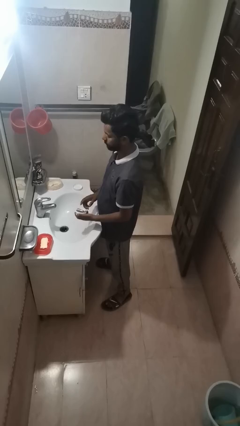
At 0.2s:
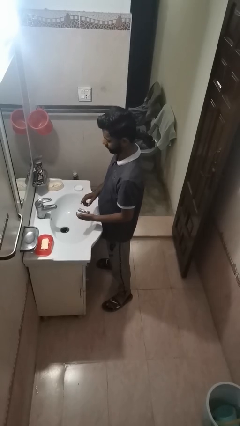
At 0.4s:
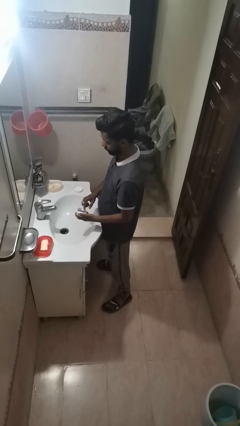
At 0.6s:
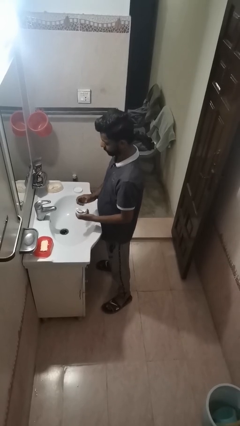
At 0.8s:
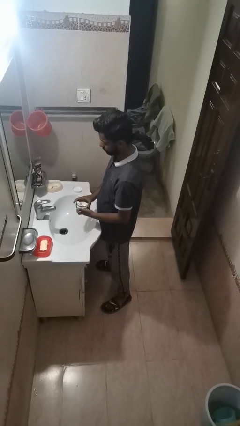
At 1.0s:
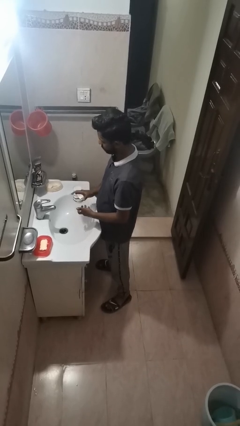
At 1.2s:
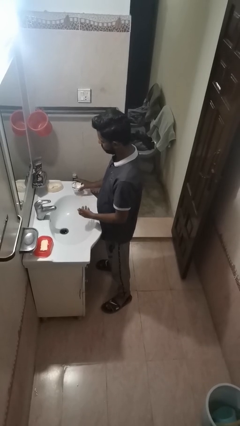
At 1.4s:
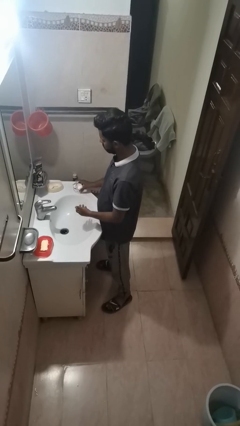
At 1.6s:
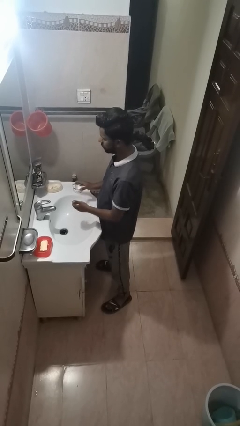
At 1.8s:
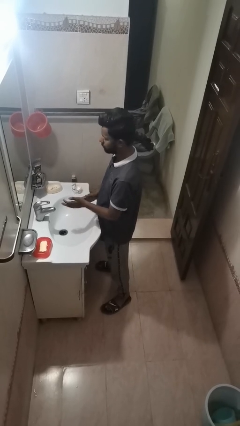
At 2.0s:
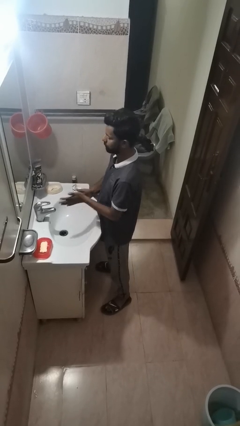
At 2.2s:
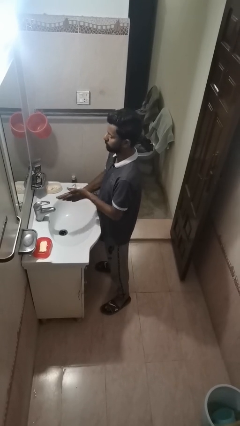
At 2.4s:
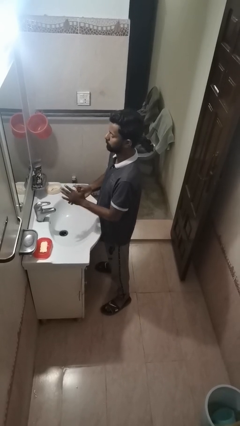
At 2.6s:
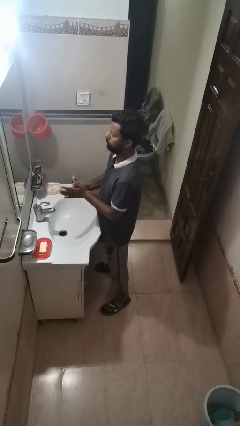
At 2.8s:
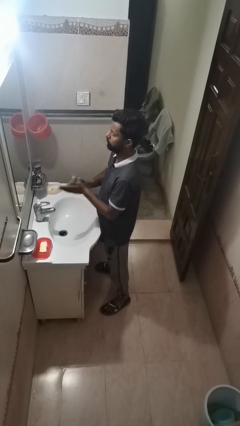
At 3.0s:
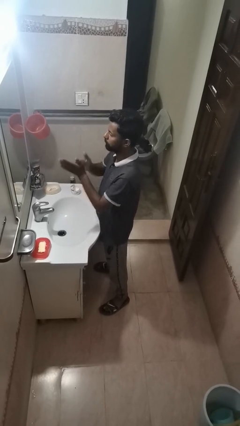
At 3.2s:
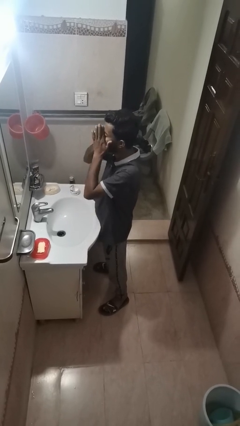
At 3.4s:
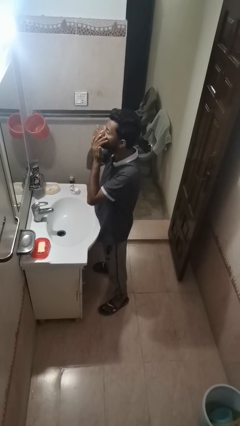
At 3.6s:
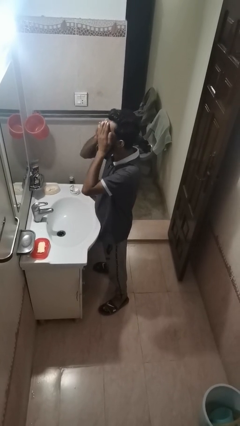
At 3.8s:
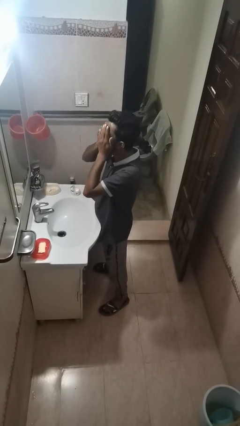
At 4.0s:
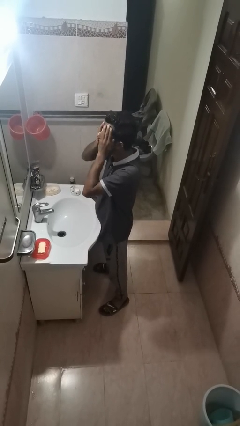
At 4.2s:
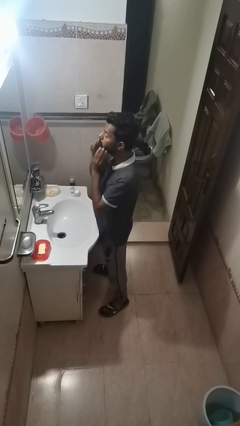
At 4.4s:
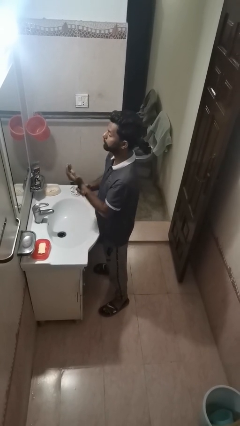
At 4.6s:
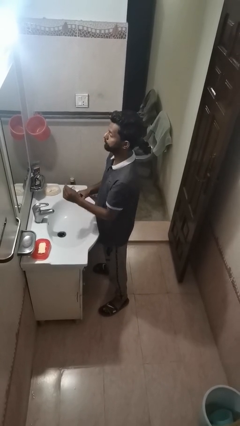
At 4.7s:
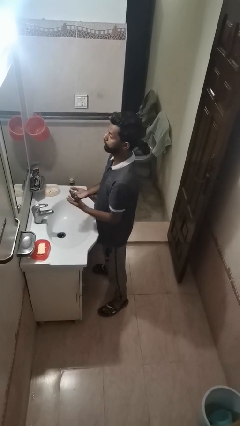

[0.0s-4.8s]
person applies facial moisturizer

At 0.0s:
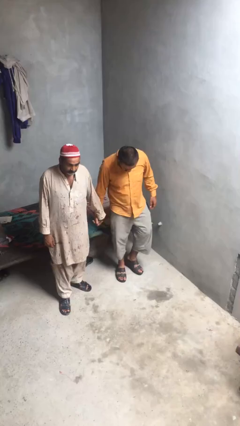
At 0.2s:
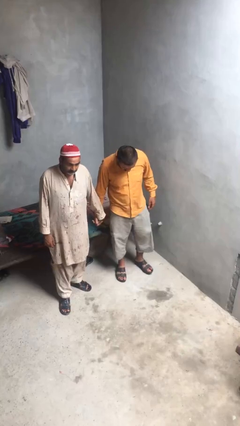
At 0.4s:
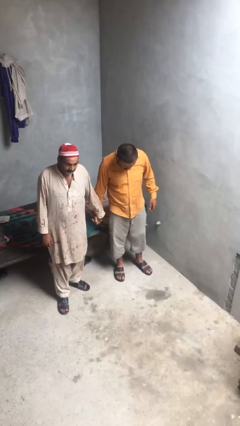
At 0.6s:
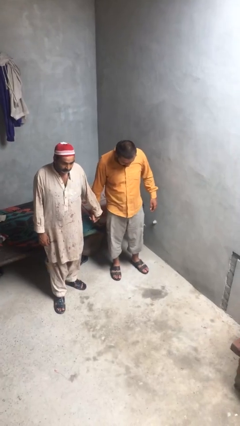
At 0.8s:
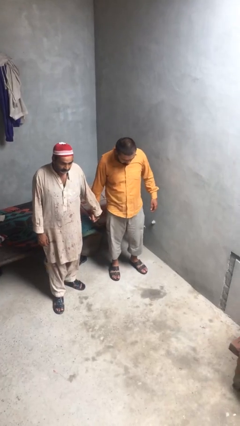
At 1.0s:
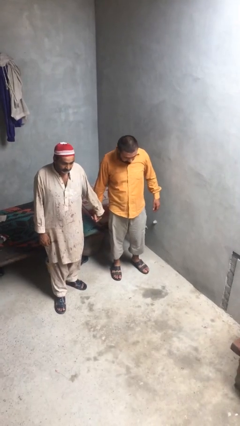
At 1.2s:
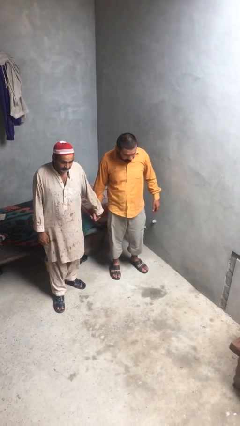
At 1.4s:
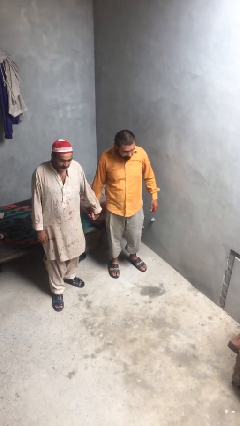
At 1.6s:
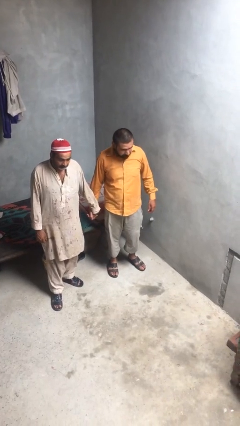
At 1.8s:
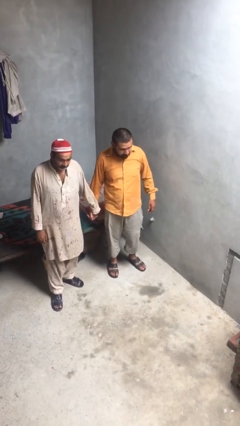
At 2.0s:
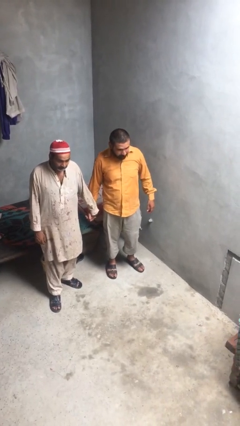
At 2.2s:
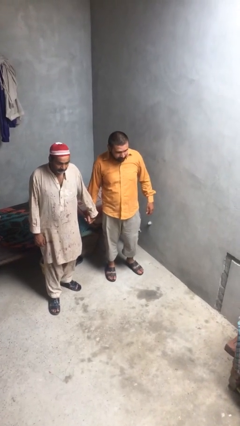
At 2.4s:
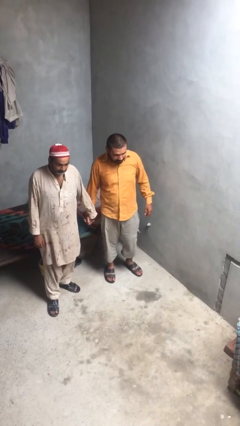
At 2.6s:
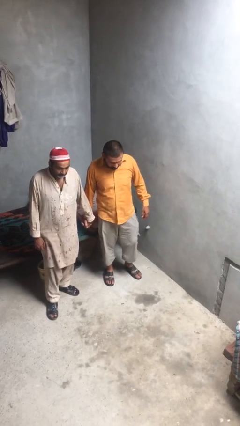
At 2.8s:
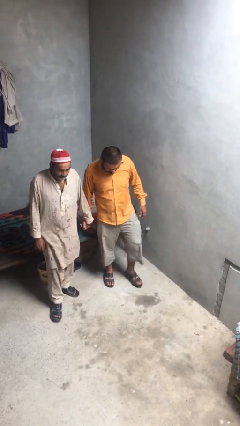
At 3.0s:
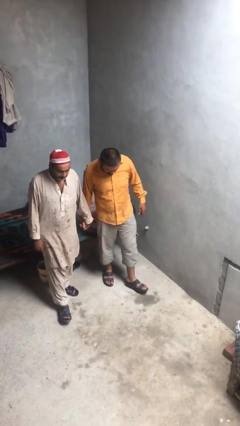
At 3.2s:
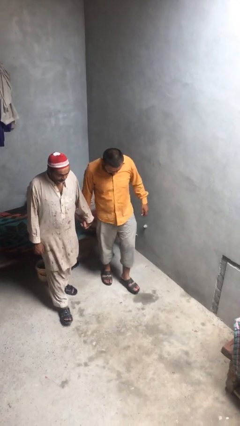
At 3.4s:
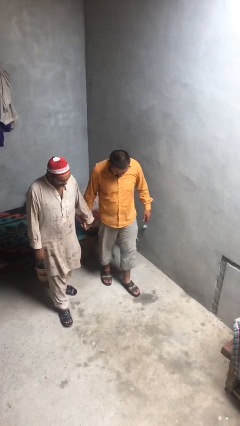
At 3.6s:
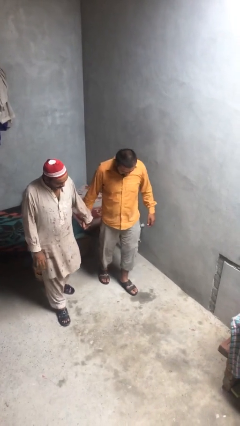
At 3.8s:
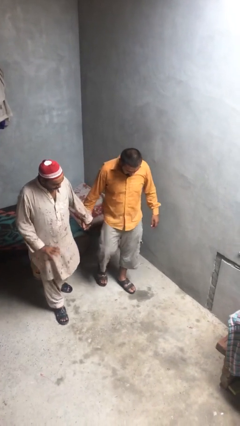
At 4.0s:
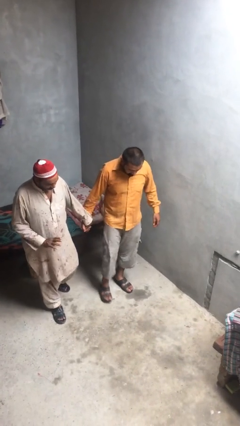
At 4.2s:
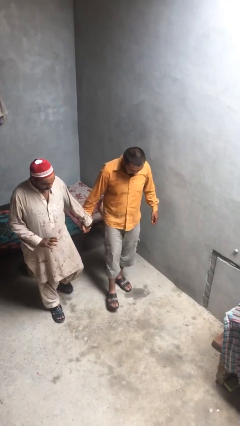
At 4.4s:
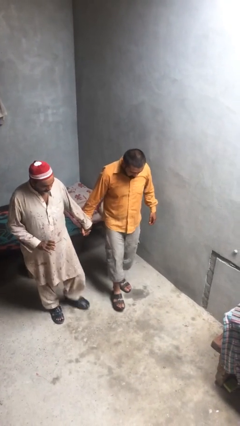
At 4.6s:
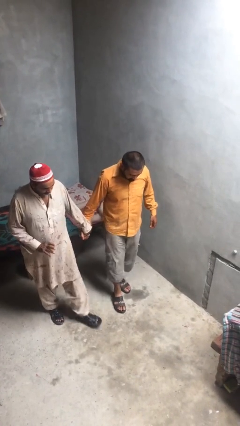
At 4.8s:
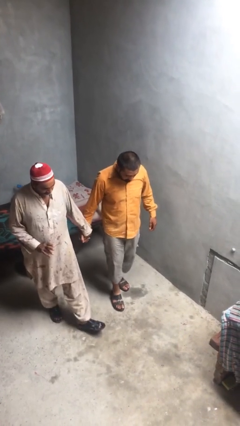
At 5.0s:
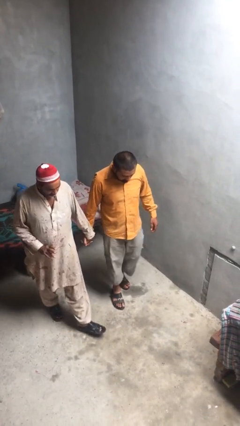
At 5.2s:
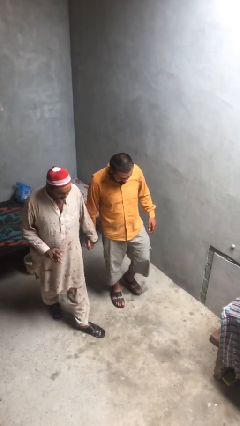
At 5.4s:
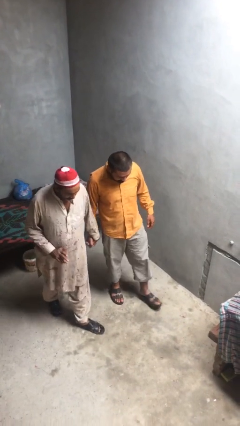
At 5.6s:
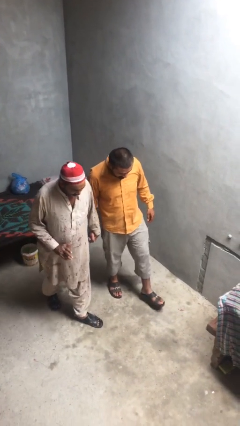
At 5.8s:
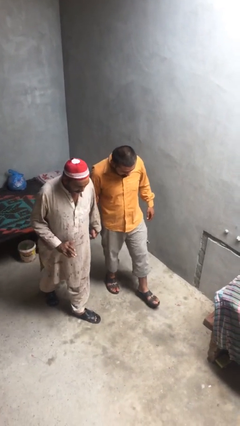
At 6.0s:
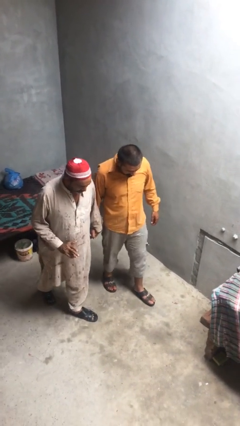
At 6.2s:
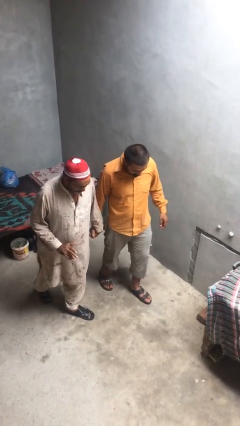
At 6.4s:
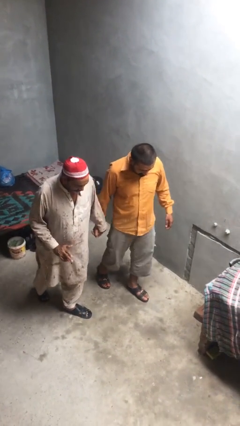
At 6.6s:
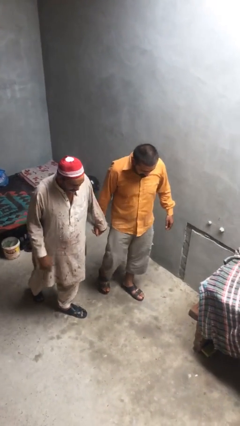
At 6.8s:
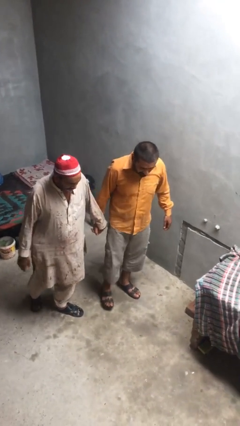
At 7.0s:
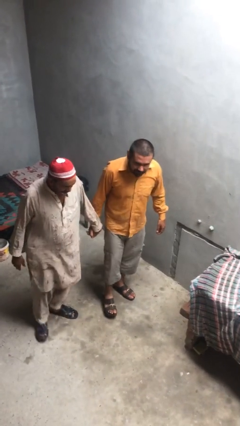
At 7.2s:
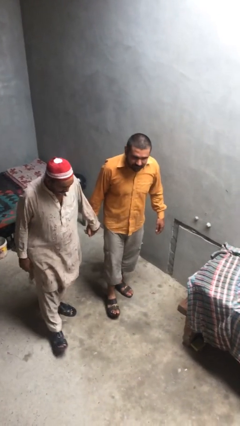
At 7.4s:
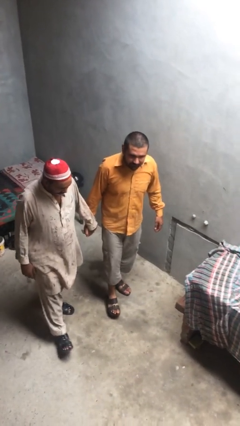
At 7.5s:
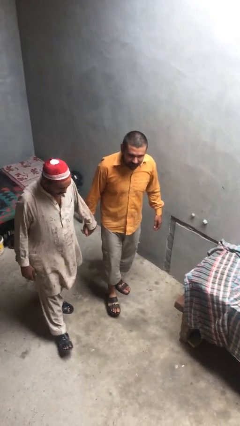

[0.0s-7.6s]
person holds hand

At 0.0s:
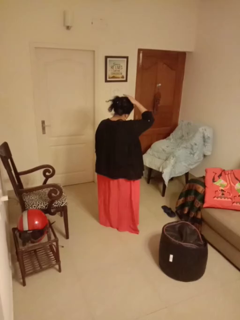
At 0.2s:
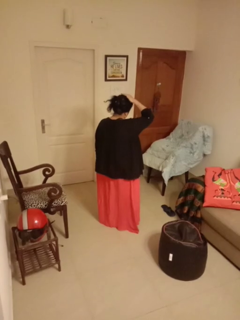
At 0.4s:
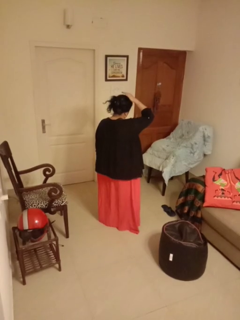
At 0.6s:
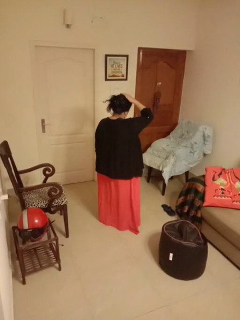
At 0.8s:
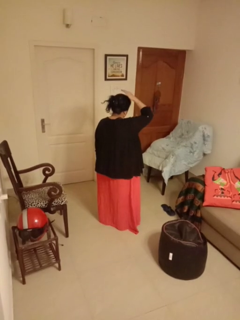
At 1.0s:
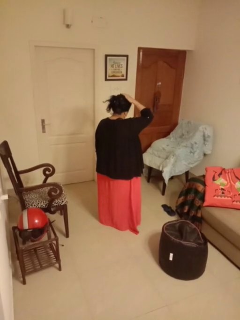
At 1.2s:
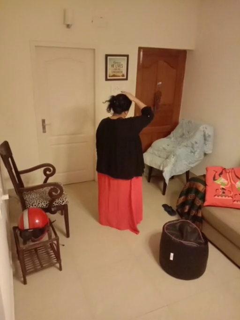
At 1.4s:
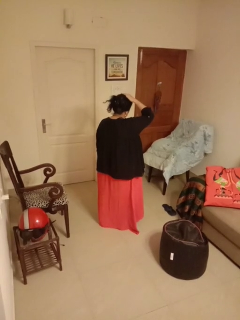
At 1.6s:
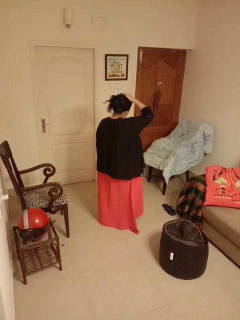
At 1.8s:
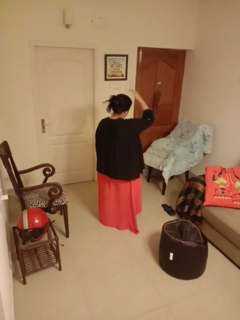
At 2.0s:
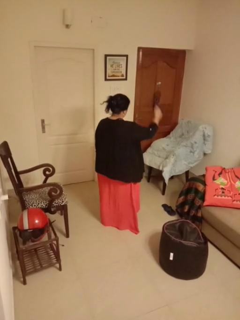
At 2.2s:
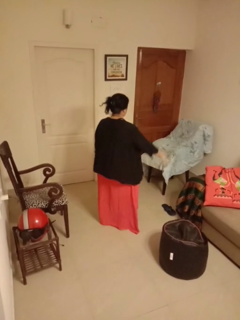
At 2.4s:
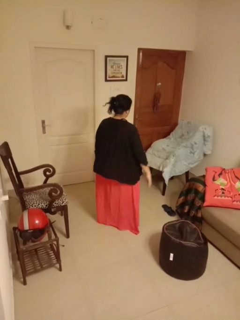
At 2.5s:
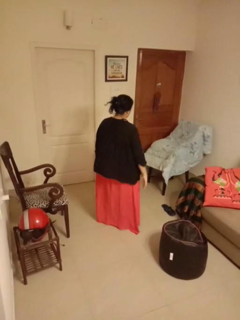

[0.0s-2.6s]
person pats head

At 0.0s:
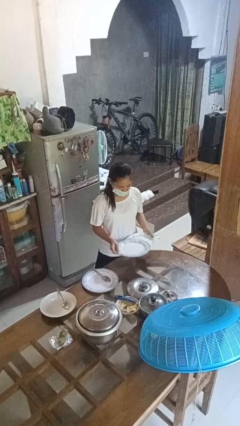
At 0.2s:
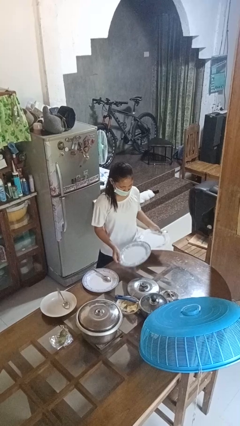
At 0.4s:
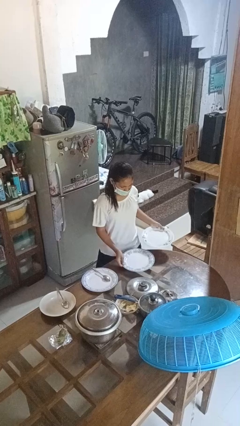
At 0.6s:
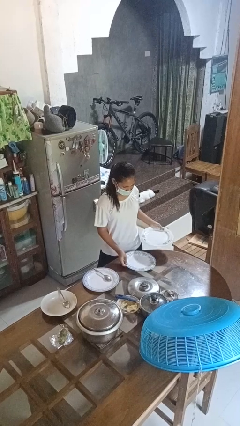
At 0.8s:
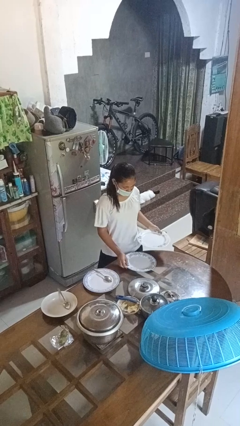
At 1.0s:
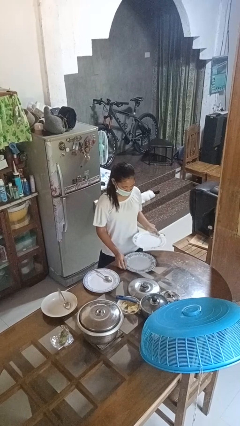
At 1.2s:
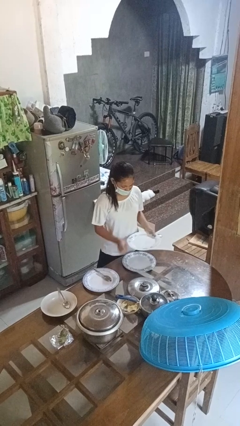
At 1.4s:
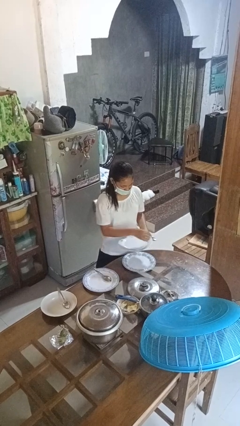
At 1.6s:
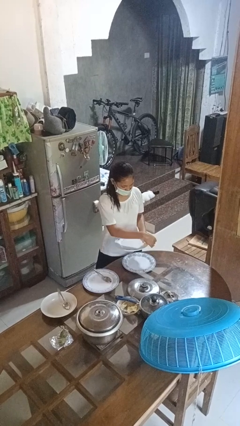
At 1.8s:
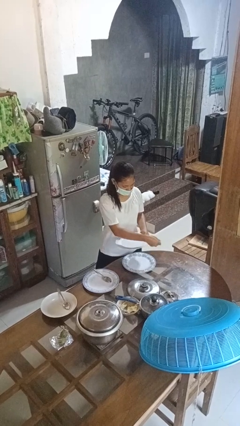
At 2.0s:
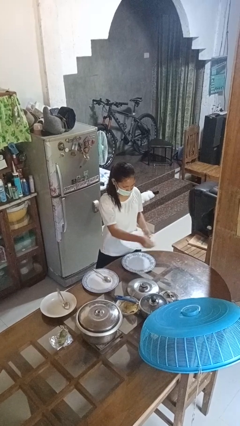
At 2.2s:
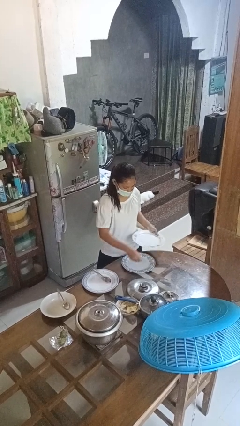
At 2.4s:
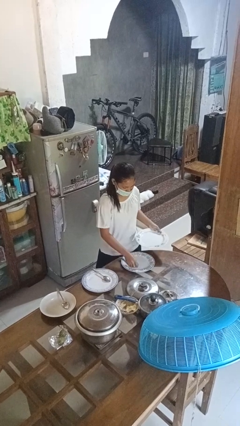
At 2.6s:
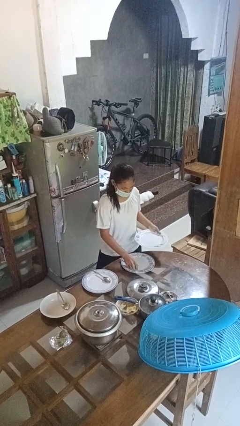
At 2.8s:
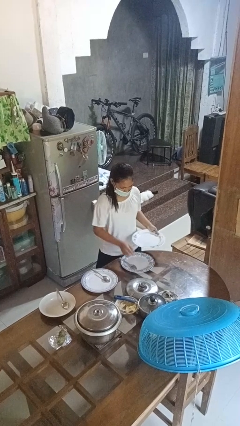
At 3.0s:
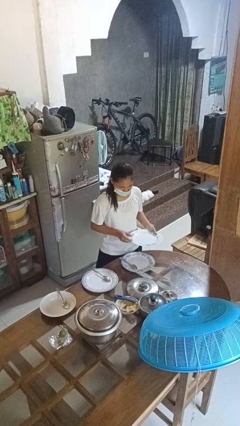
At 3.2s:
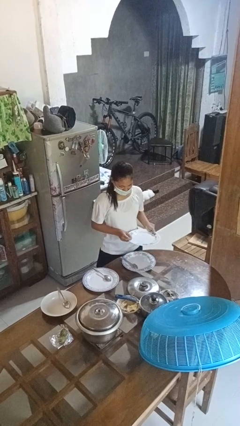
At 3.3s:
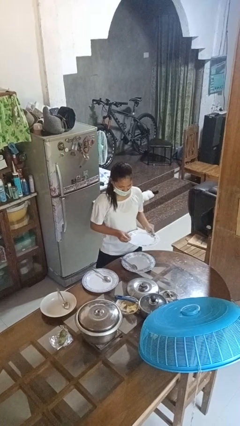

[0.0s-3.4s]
person sets table

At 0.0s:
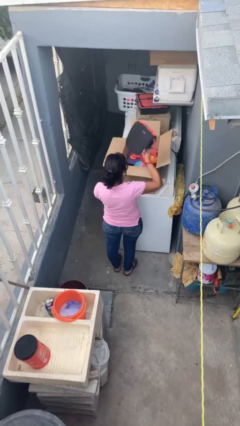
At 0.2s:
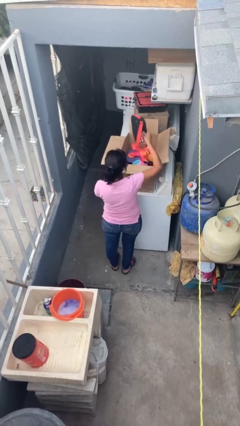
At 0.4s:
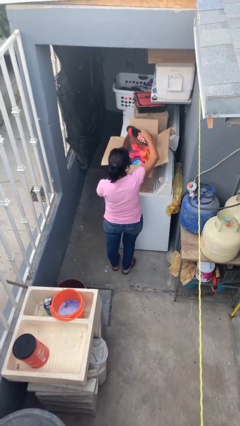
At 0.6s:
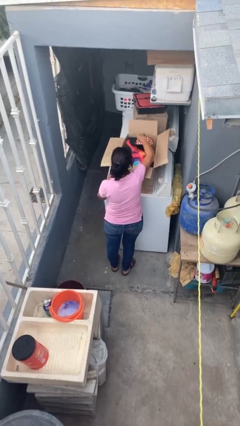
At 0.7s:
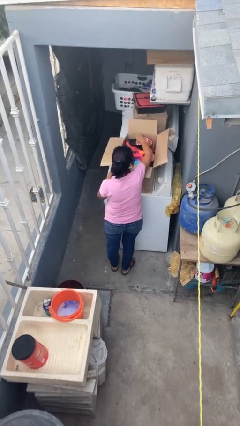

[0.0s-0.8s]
person puts object into box
